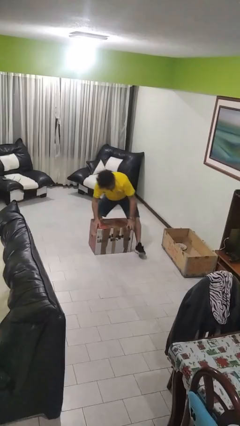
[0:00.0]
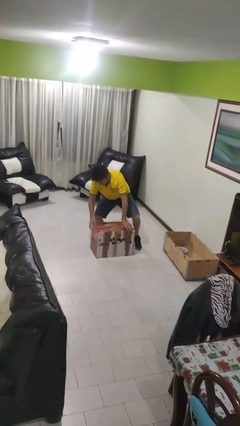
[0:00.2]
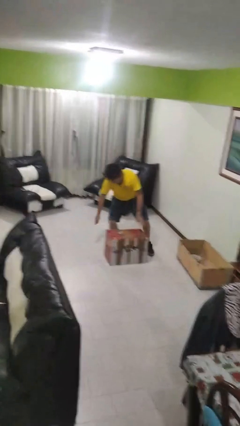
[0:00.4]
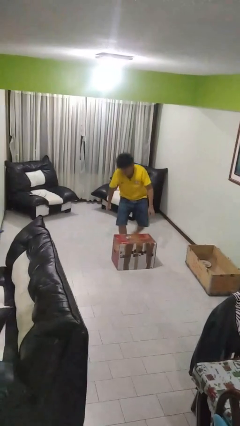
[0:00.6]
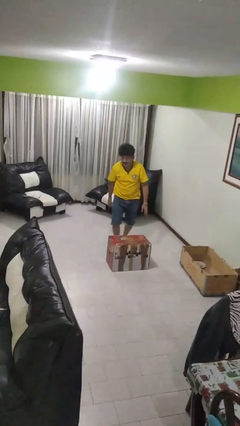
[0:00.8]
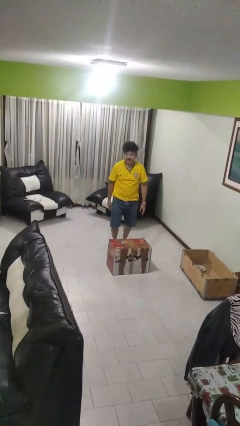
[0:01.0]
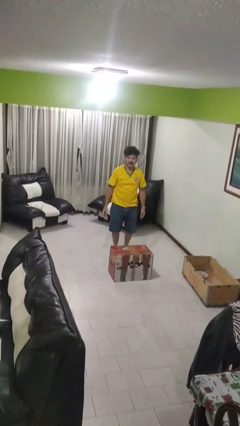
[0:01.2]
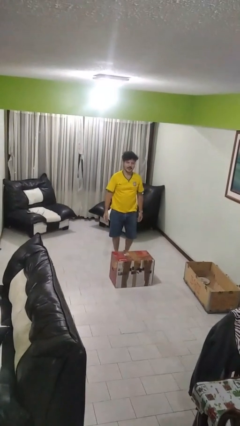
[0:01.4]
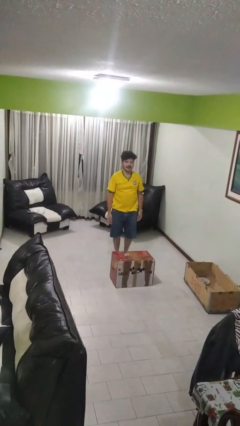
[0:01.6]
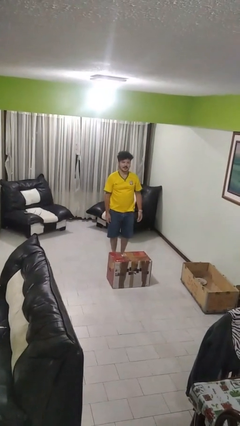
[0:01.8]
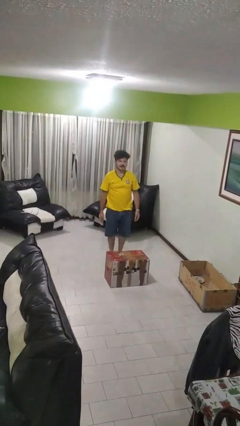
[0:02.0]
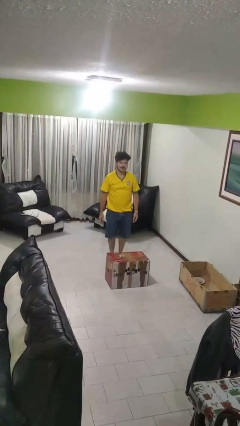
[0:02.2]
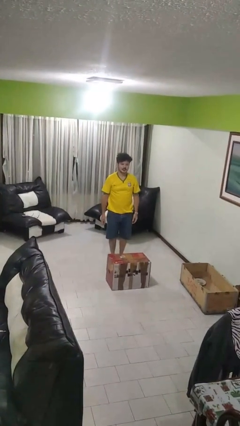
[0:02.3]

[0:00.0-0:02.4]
person stands up from floor

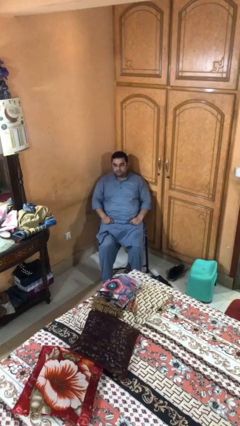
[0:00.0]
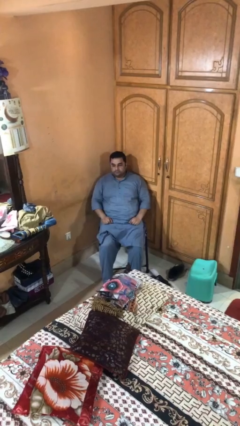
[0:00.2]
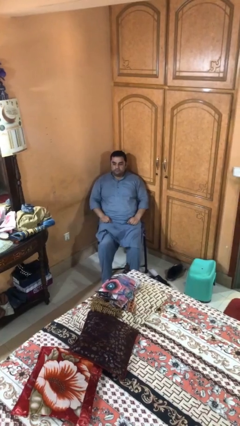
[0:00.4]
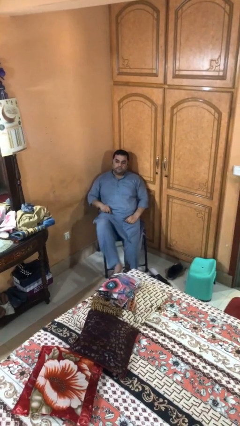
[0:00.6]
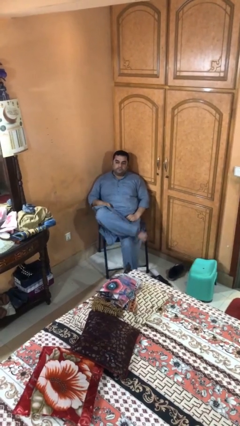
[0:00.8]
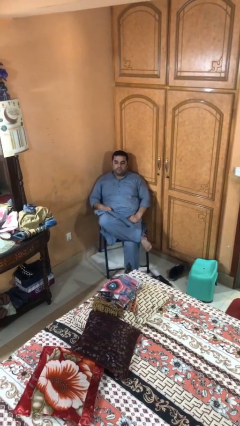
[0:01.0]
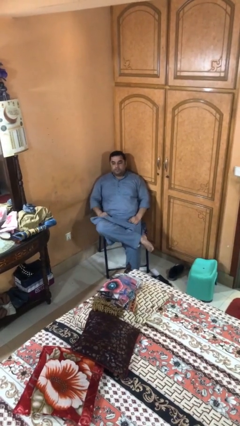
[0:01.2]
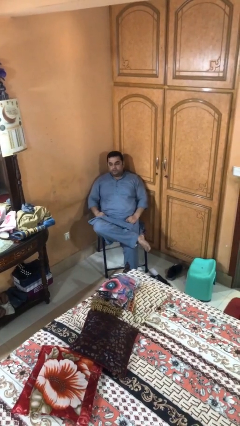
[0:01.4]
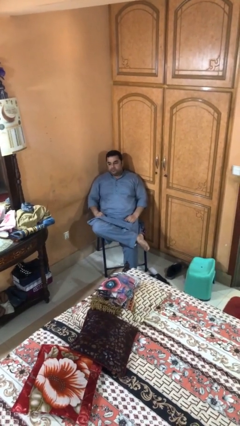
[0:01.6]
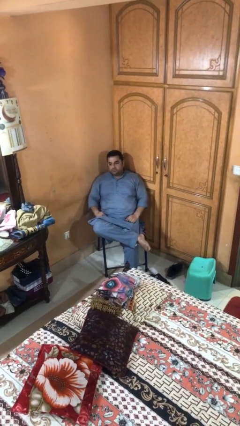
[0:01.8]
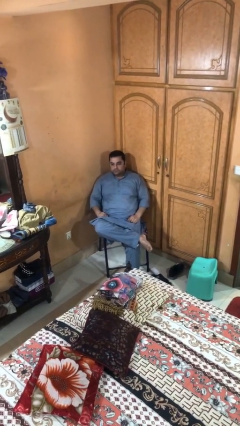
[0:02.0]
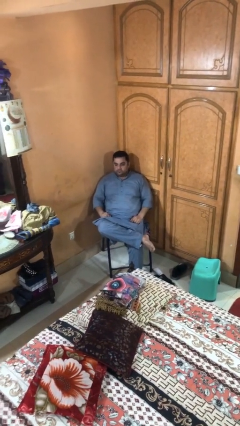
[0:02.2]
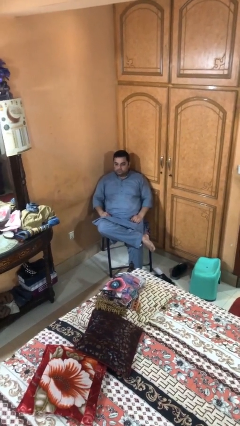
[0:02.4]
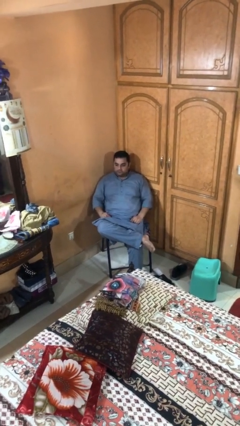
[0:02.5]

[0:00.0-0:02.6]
person crosses legs

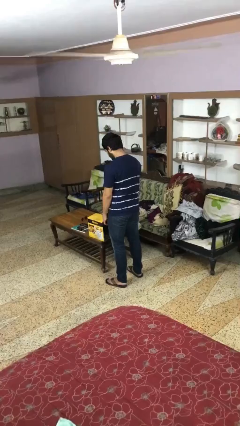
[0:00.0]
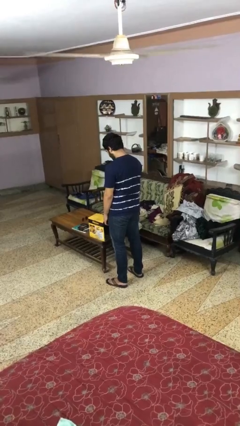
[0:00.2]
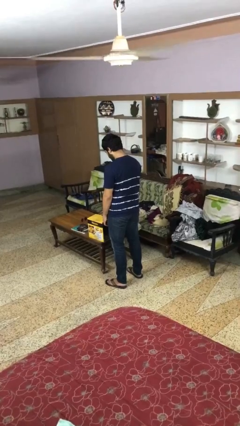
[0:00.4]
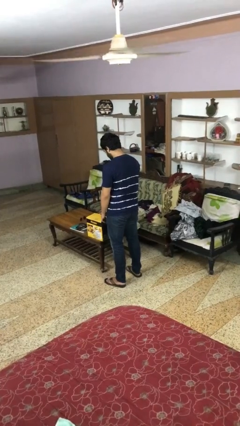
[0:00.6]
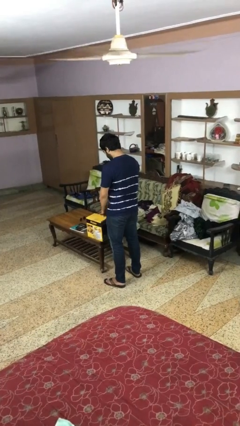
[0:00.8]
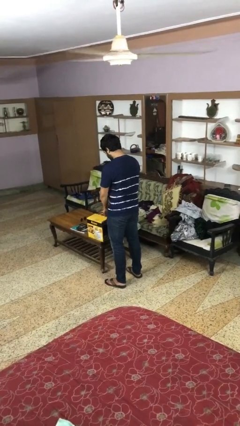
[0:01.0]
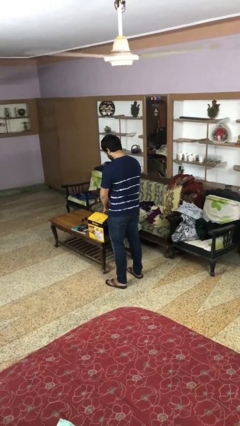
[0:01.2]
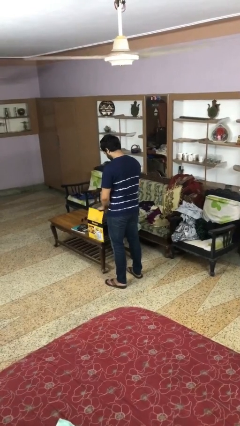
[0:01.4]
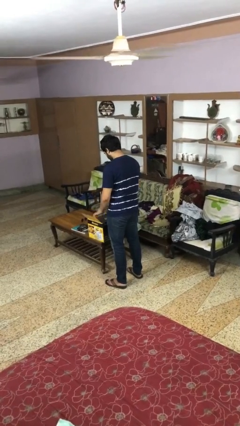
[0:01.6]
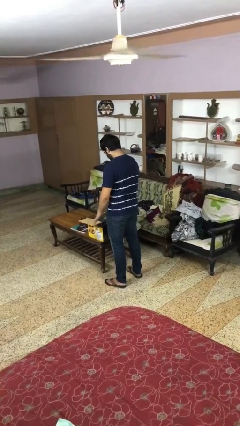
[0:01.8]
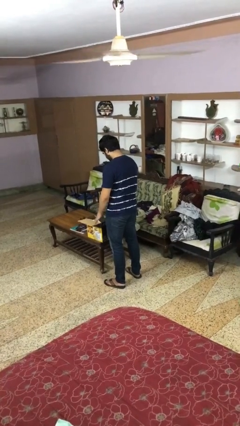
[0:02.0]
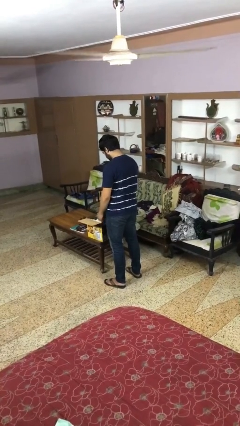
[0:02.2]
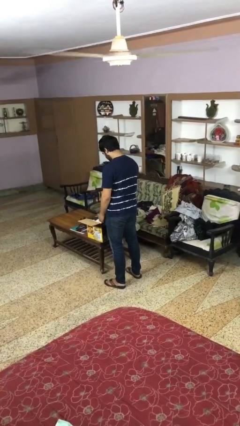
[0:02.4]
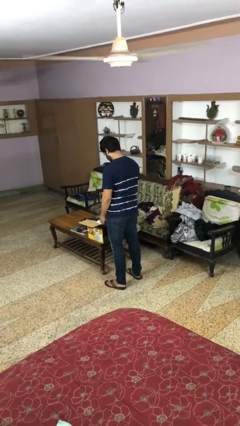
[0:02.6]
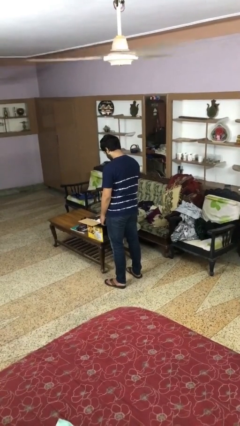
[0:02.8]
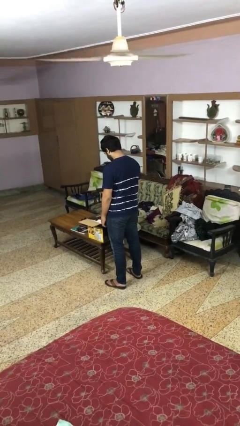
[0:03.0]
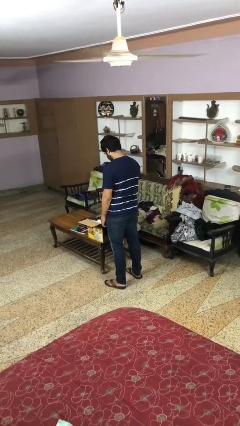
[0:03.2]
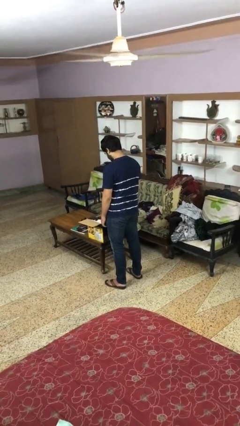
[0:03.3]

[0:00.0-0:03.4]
person opens box

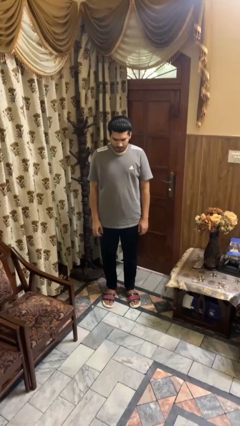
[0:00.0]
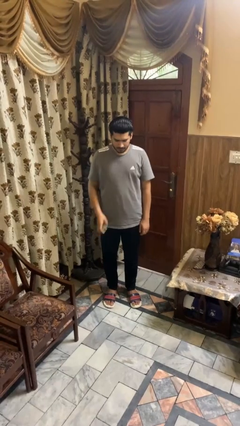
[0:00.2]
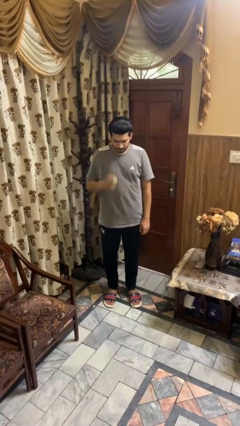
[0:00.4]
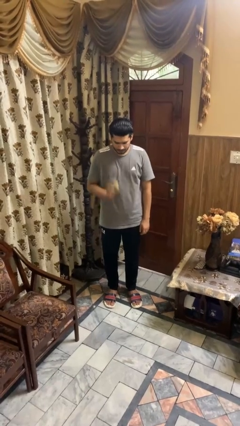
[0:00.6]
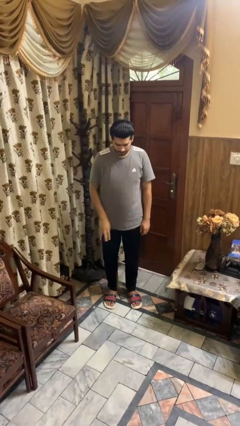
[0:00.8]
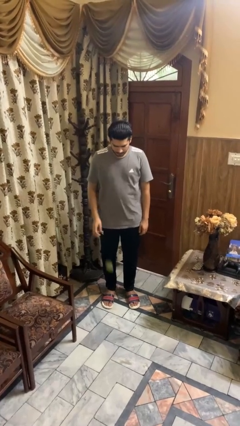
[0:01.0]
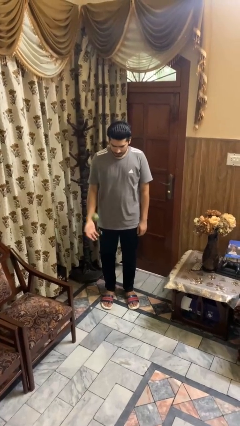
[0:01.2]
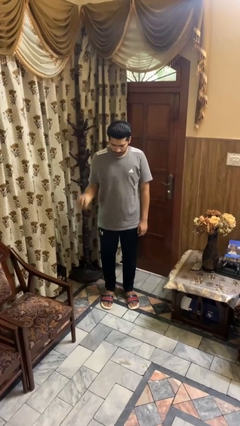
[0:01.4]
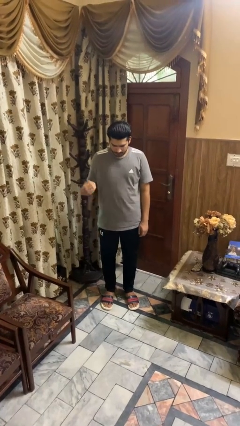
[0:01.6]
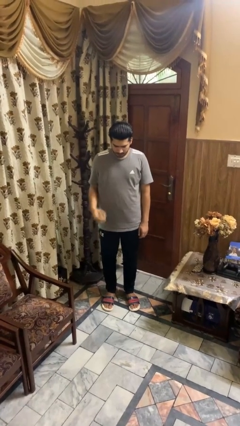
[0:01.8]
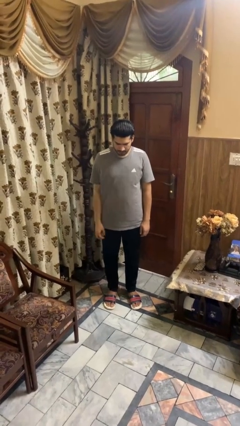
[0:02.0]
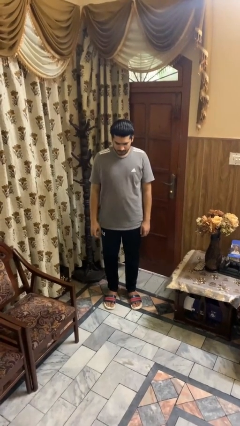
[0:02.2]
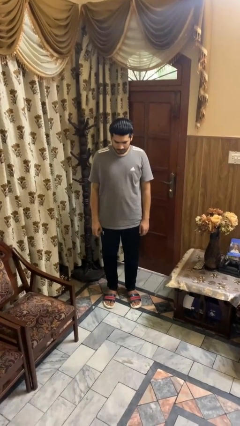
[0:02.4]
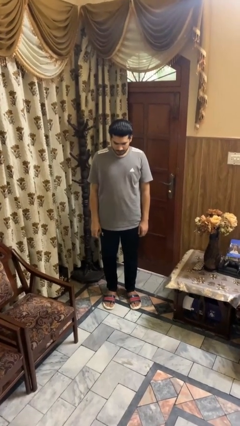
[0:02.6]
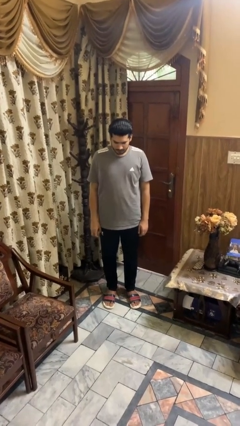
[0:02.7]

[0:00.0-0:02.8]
person bounces ball on floor

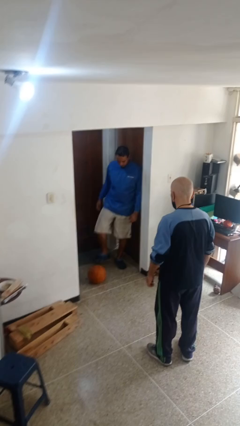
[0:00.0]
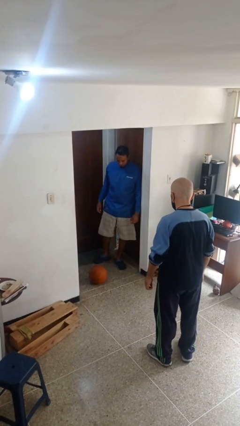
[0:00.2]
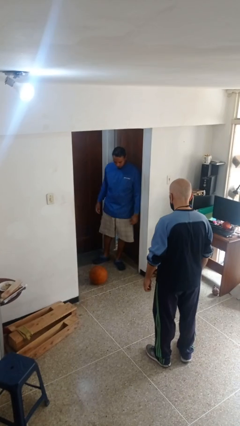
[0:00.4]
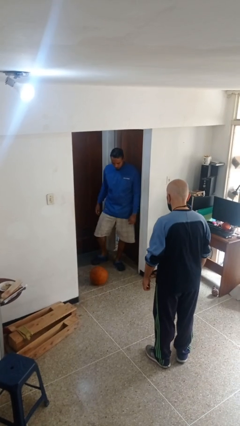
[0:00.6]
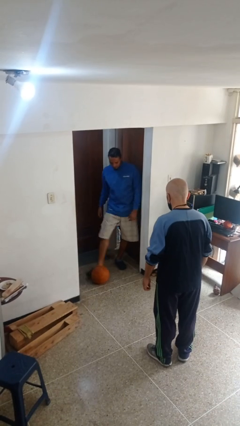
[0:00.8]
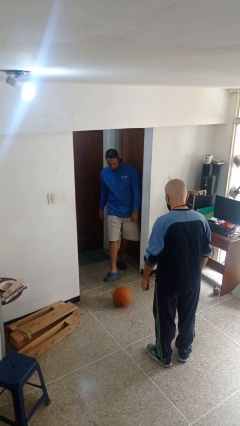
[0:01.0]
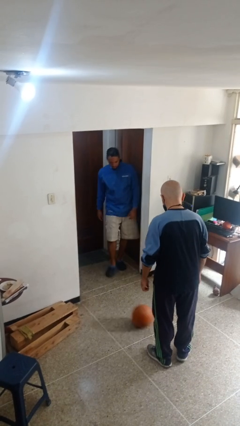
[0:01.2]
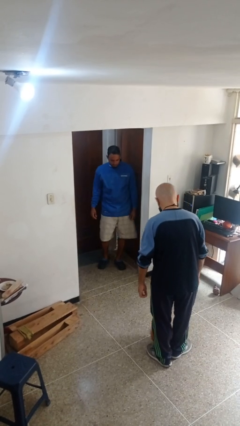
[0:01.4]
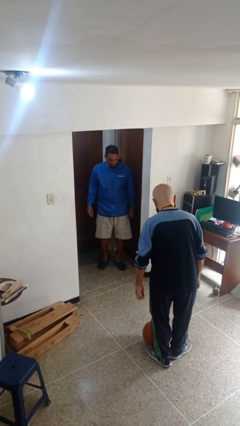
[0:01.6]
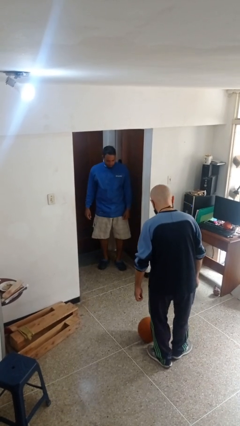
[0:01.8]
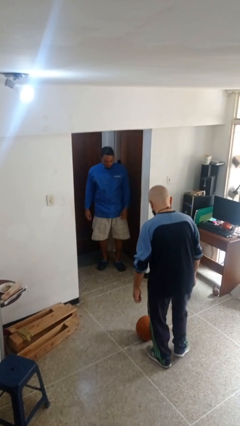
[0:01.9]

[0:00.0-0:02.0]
person kicks object to person

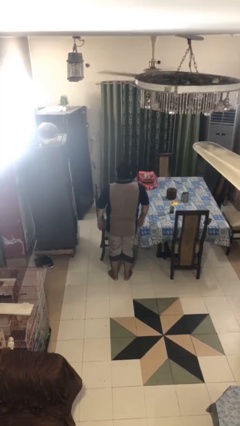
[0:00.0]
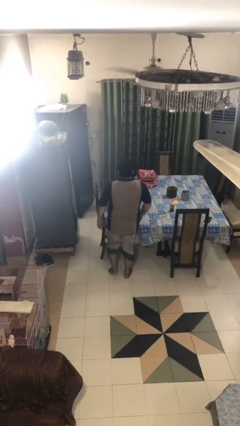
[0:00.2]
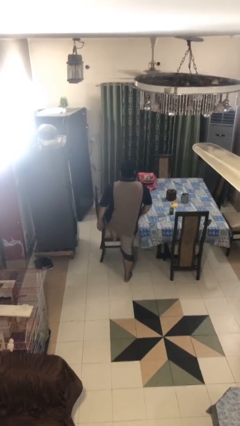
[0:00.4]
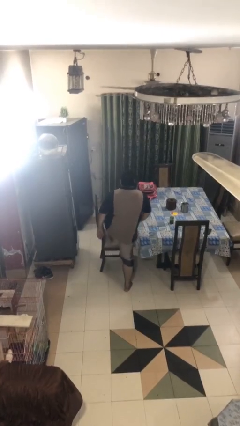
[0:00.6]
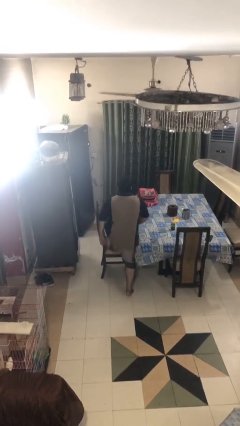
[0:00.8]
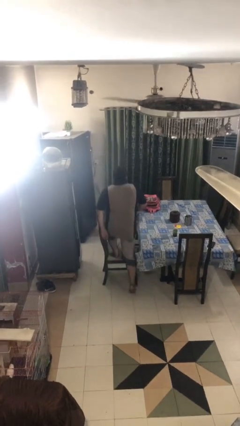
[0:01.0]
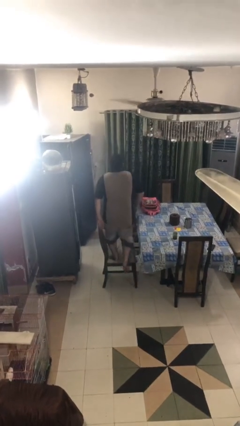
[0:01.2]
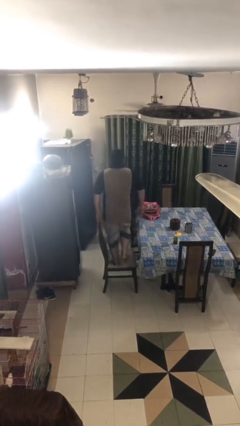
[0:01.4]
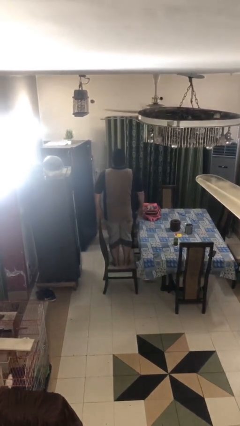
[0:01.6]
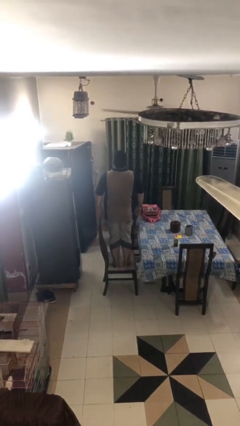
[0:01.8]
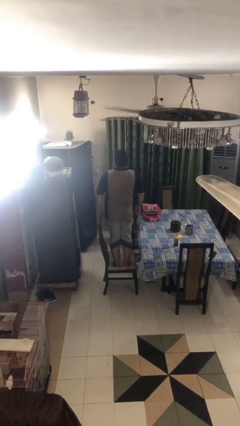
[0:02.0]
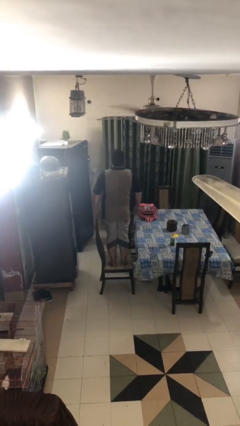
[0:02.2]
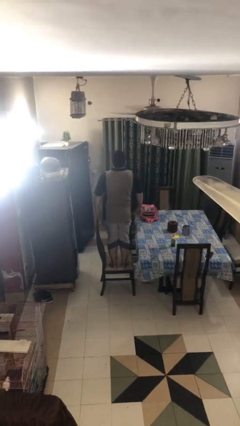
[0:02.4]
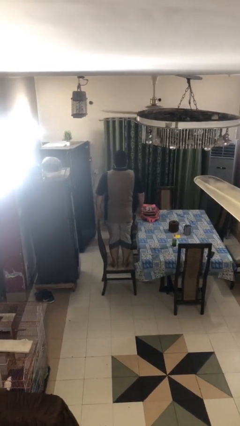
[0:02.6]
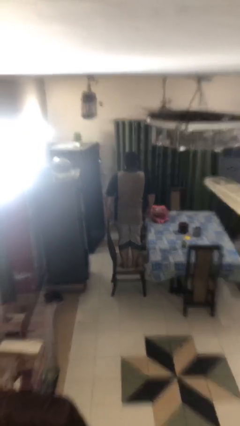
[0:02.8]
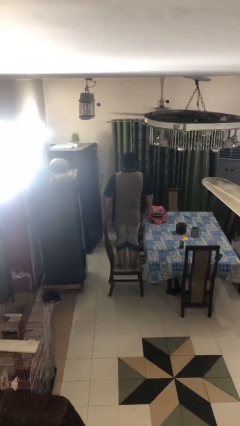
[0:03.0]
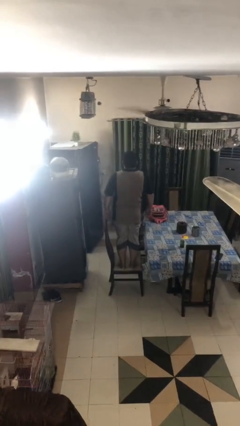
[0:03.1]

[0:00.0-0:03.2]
person climbs on chair

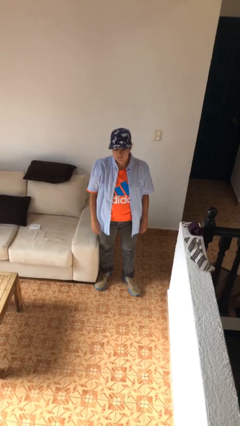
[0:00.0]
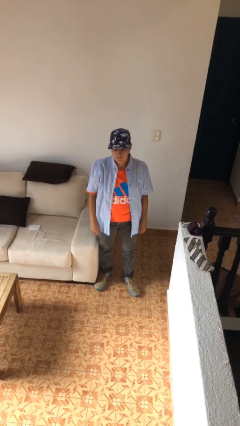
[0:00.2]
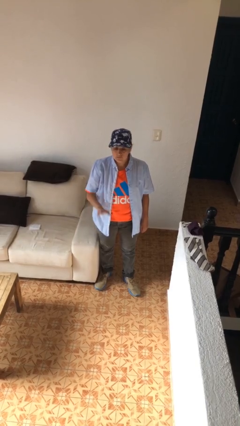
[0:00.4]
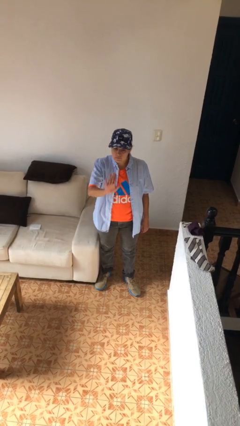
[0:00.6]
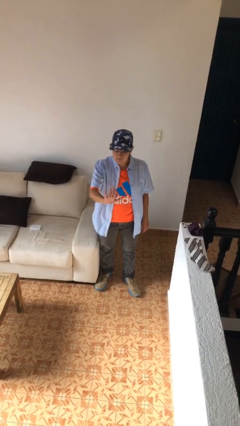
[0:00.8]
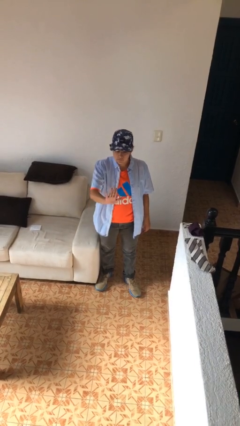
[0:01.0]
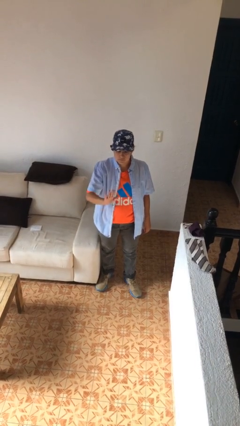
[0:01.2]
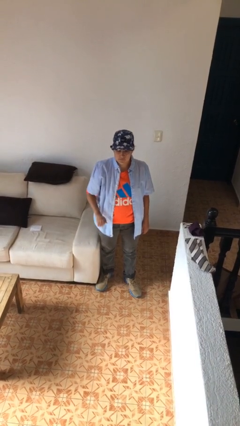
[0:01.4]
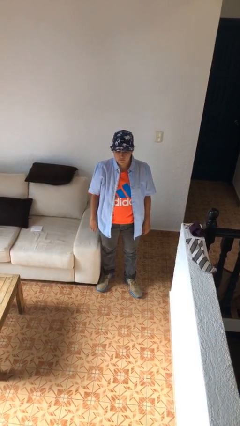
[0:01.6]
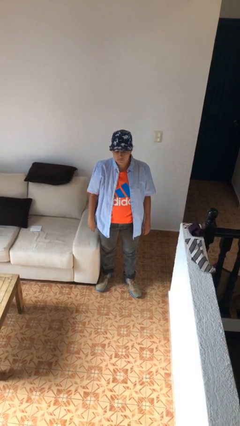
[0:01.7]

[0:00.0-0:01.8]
person gestures stop
